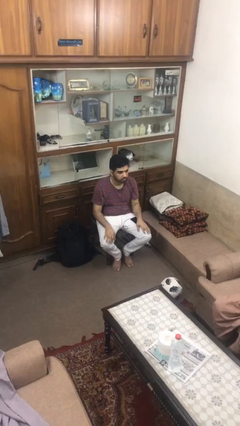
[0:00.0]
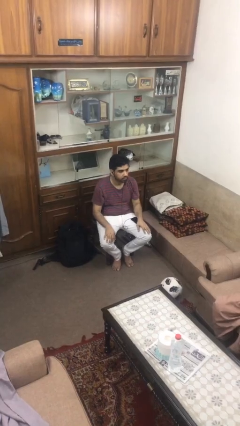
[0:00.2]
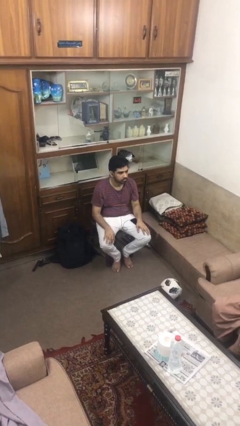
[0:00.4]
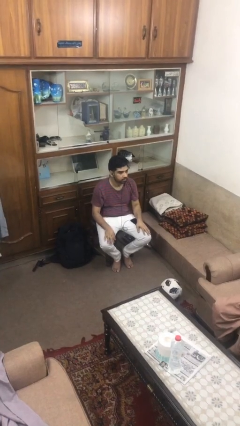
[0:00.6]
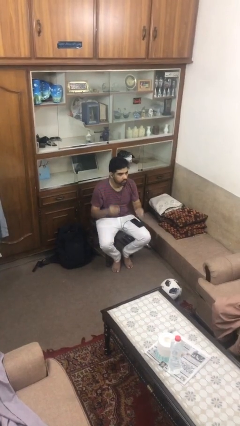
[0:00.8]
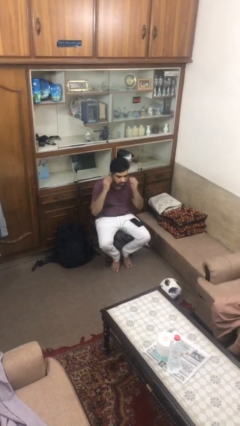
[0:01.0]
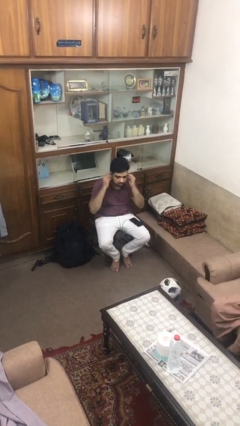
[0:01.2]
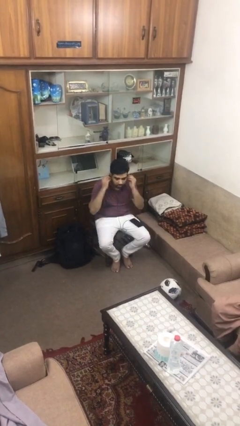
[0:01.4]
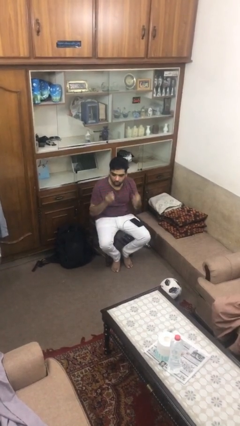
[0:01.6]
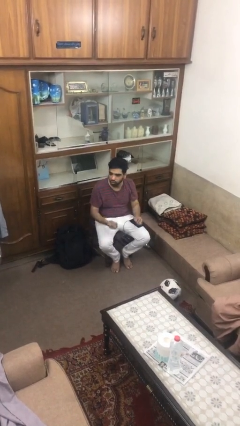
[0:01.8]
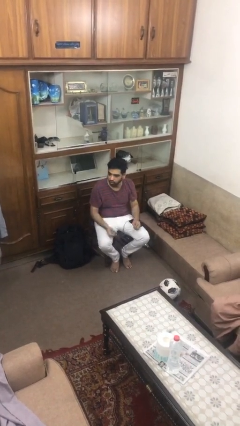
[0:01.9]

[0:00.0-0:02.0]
person takes off headphones

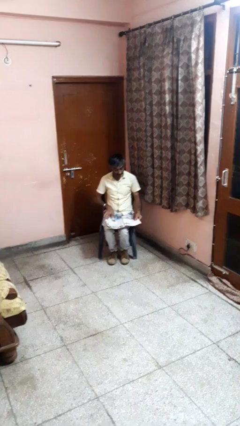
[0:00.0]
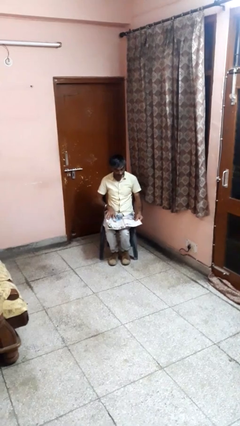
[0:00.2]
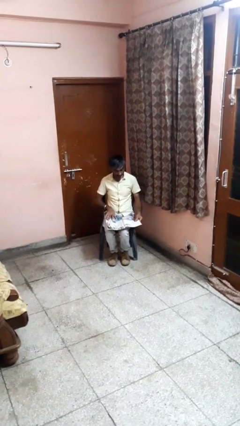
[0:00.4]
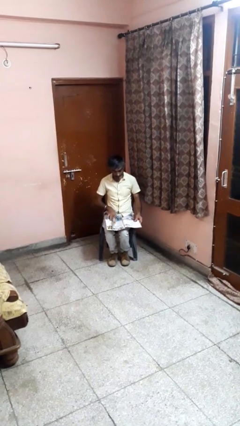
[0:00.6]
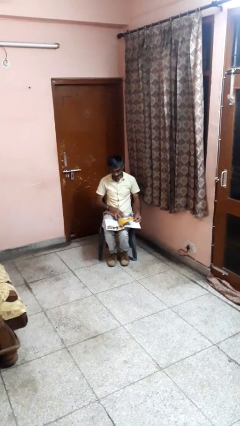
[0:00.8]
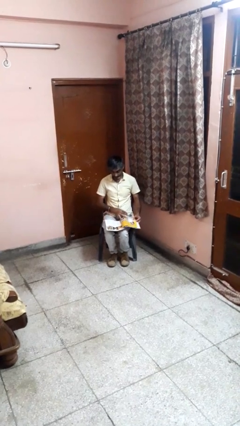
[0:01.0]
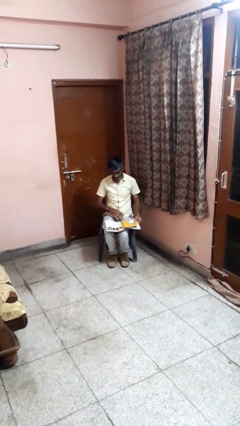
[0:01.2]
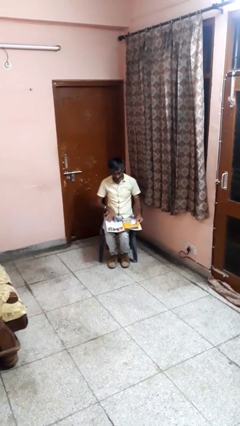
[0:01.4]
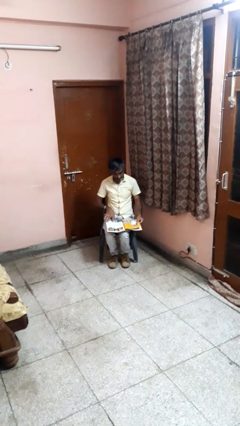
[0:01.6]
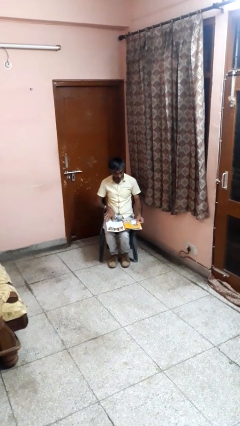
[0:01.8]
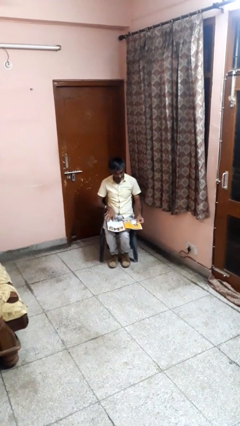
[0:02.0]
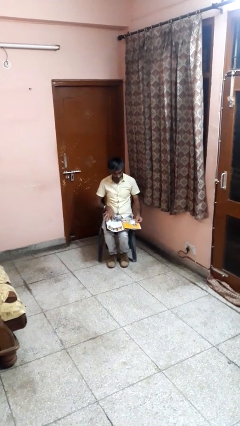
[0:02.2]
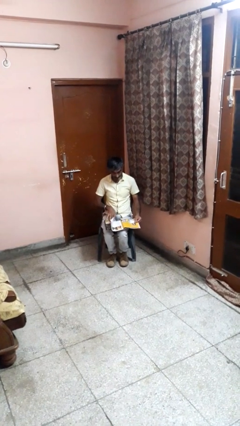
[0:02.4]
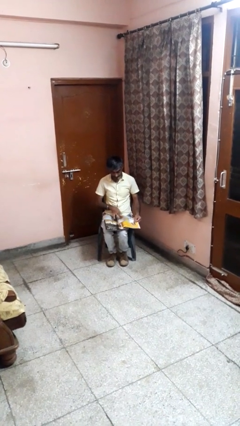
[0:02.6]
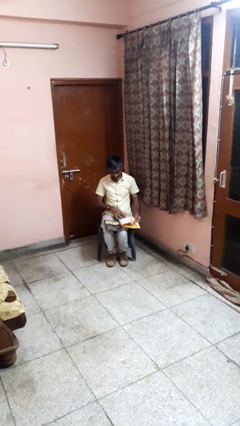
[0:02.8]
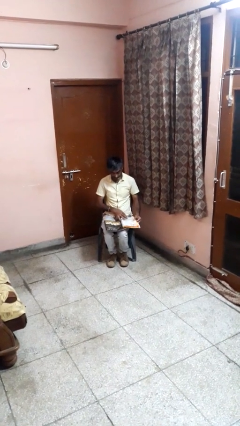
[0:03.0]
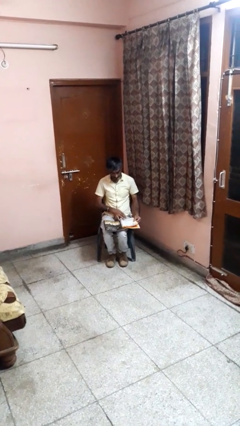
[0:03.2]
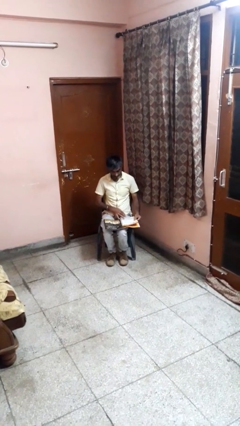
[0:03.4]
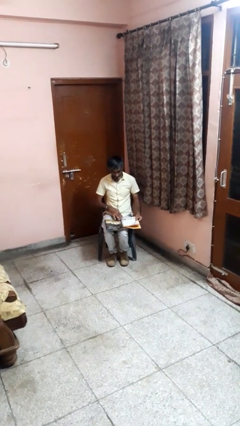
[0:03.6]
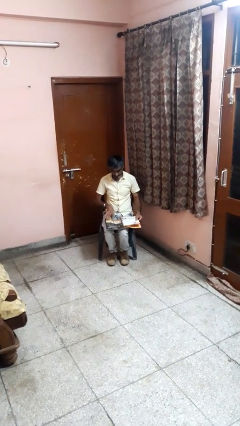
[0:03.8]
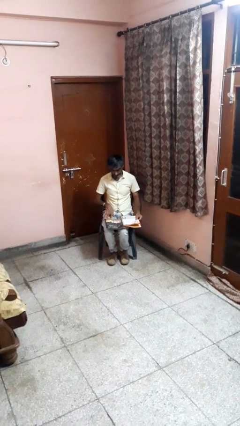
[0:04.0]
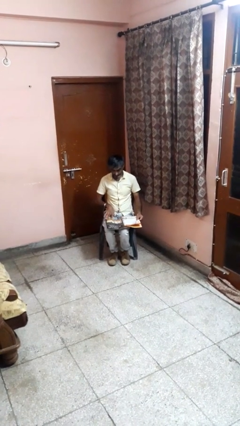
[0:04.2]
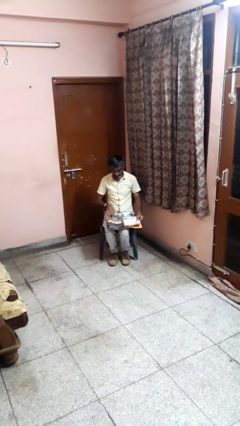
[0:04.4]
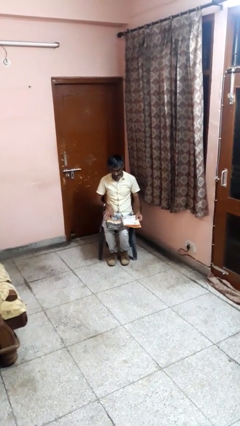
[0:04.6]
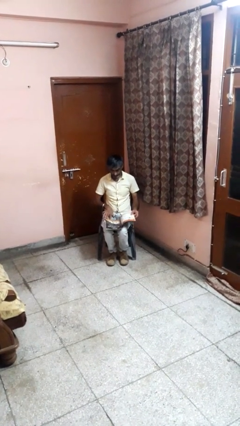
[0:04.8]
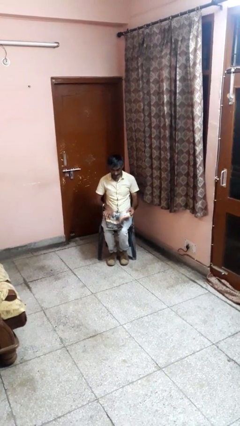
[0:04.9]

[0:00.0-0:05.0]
person reads magazine

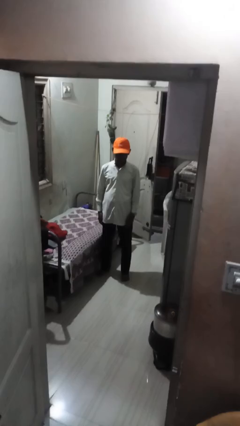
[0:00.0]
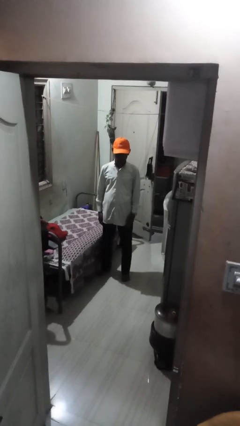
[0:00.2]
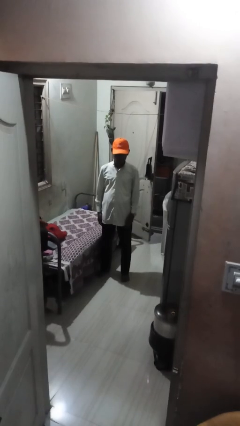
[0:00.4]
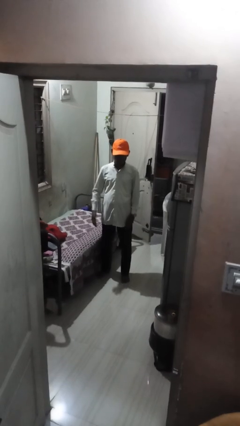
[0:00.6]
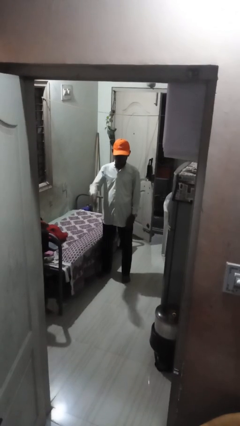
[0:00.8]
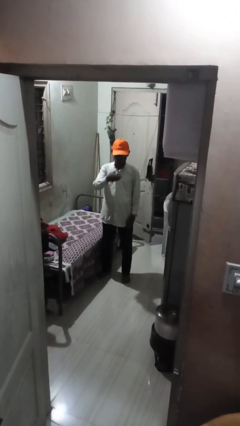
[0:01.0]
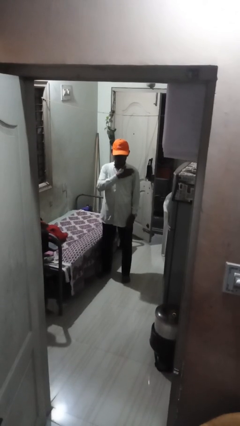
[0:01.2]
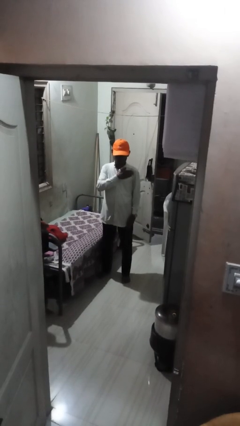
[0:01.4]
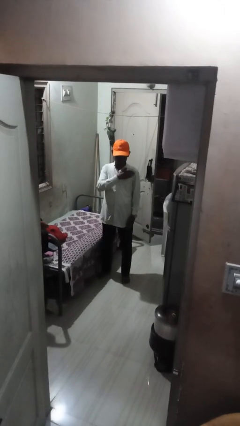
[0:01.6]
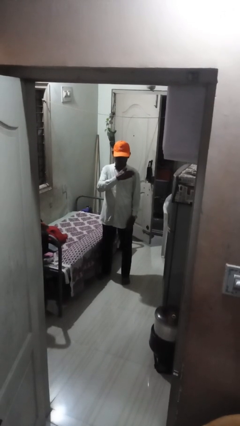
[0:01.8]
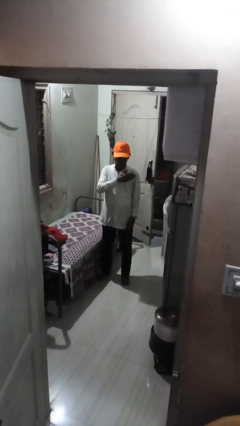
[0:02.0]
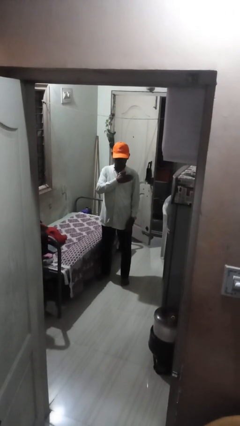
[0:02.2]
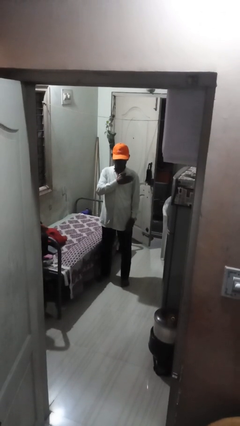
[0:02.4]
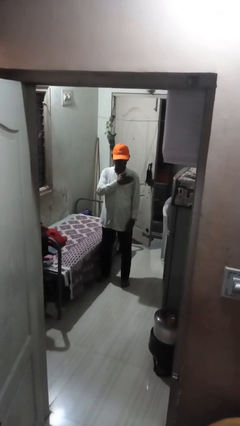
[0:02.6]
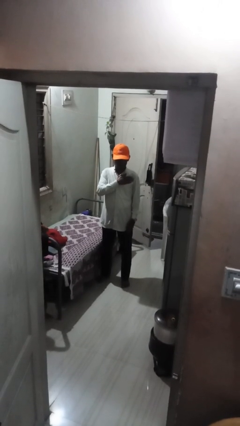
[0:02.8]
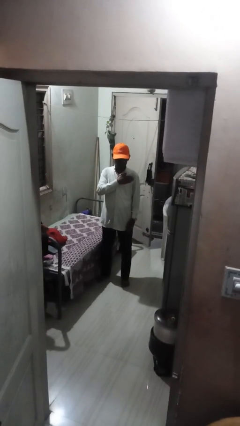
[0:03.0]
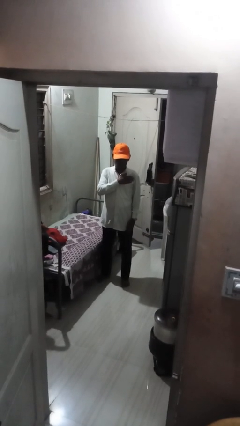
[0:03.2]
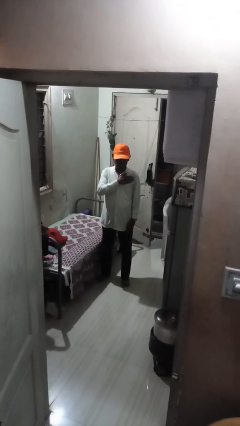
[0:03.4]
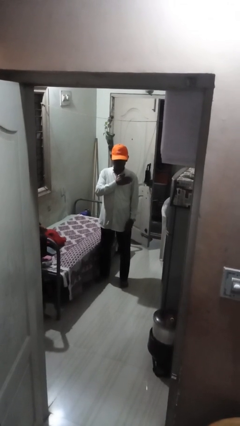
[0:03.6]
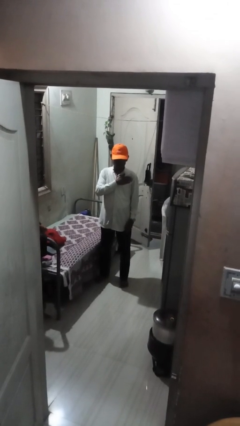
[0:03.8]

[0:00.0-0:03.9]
person drums on chest

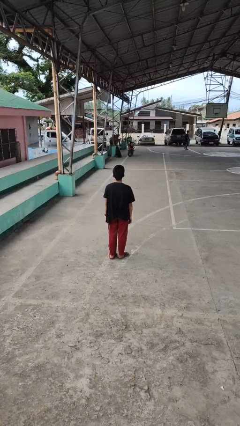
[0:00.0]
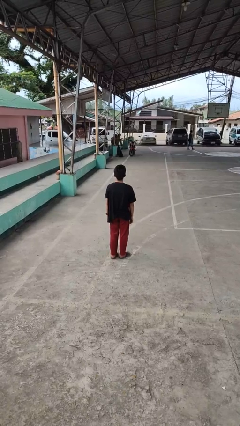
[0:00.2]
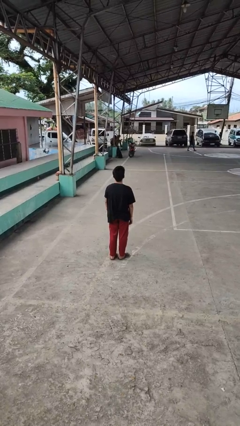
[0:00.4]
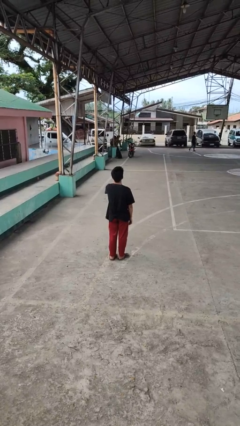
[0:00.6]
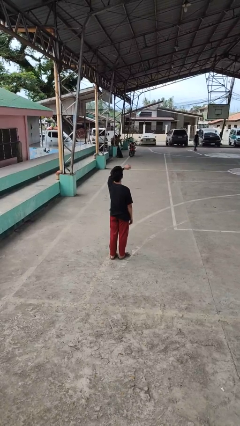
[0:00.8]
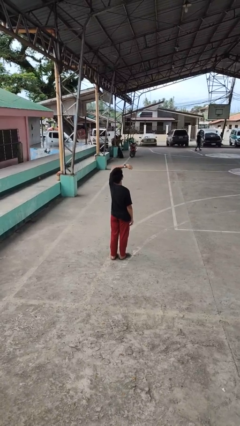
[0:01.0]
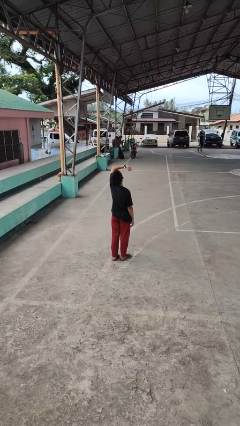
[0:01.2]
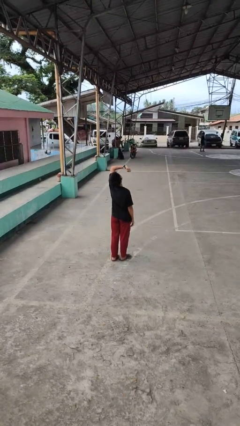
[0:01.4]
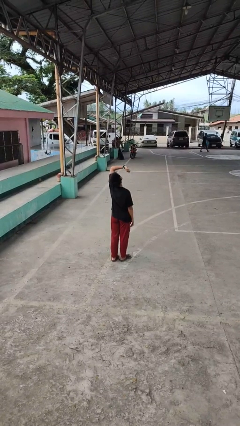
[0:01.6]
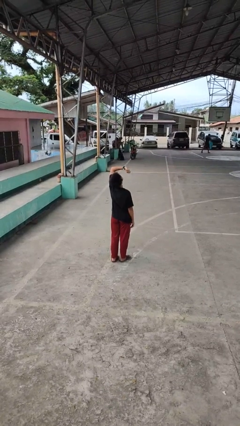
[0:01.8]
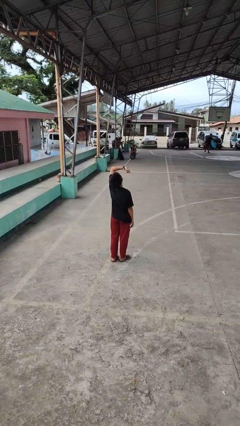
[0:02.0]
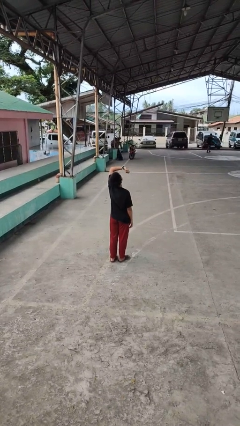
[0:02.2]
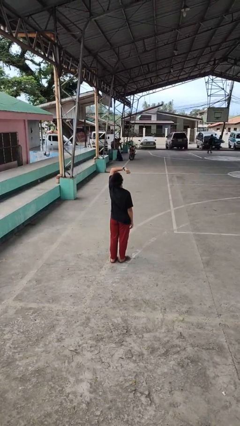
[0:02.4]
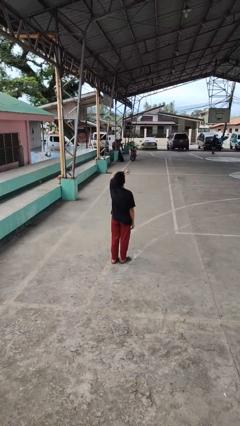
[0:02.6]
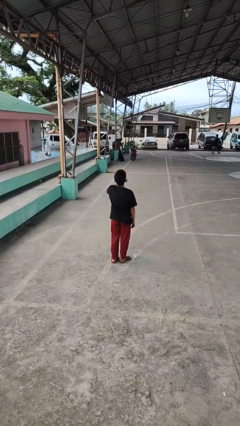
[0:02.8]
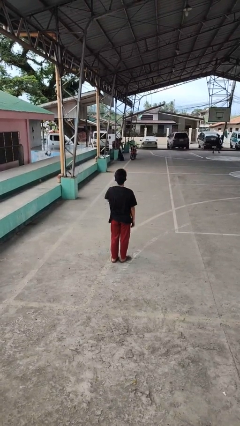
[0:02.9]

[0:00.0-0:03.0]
person looks at wristwatch

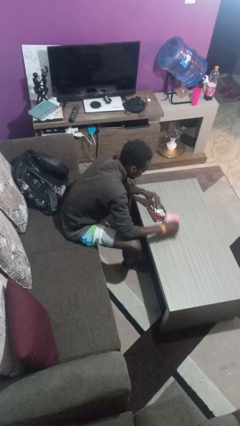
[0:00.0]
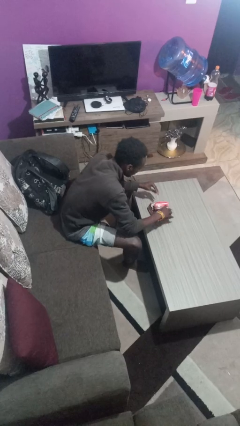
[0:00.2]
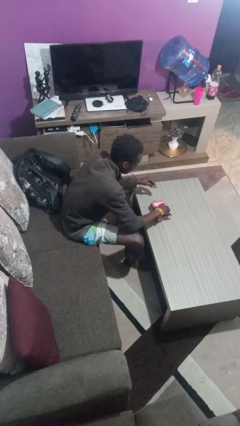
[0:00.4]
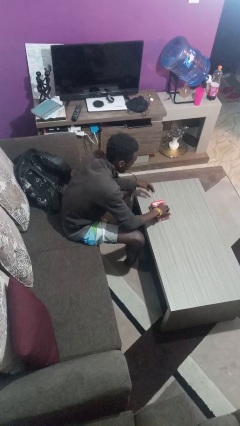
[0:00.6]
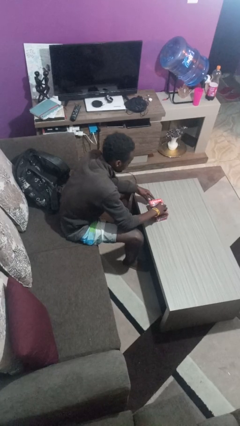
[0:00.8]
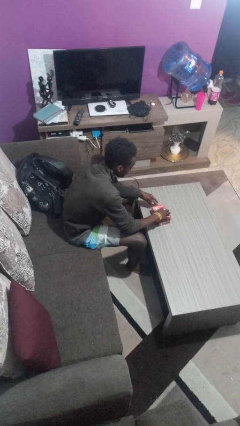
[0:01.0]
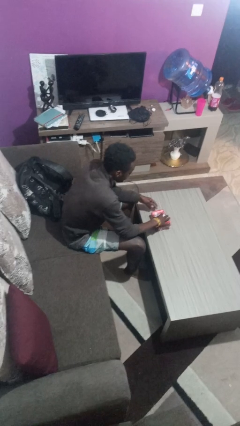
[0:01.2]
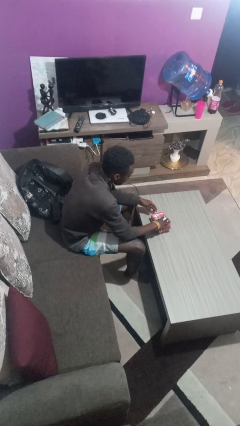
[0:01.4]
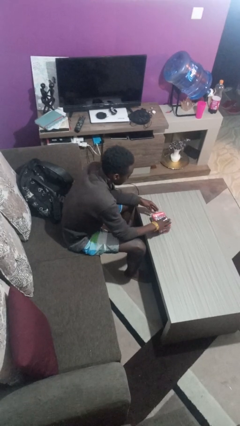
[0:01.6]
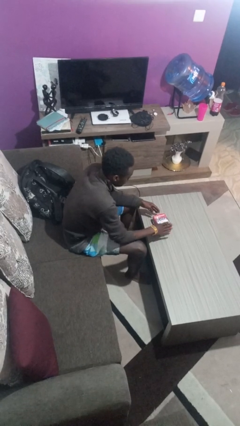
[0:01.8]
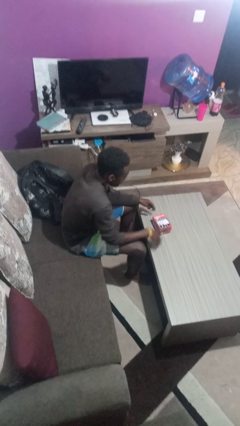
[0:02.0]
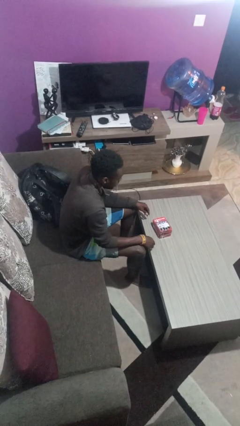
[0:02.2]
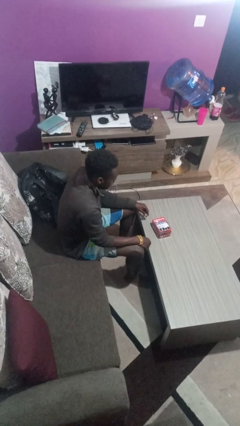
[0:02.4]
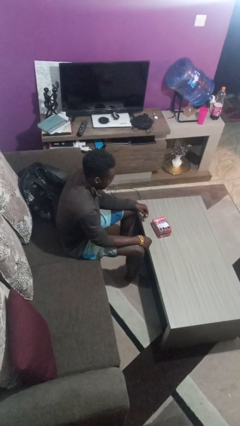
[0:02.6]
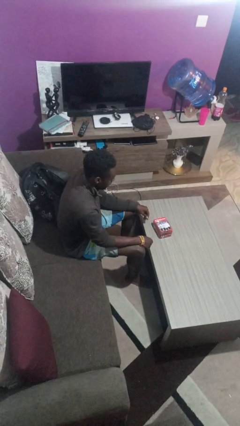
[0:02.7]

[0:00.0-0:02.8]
person closes jewelry box

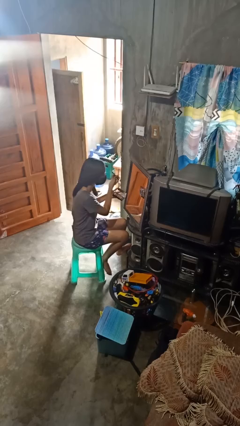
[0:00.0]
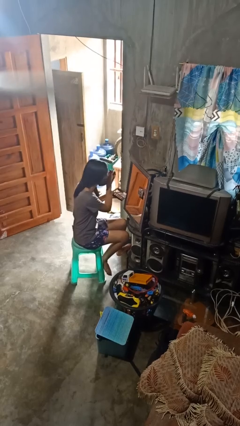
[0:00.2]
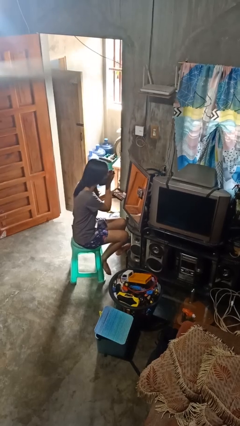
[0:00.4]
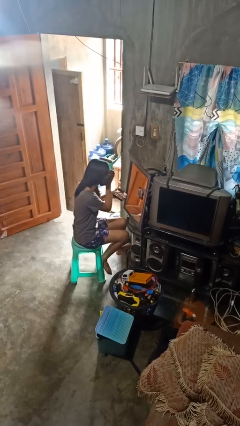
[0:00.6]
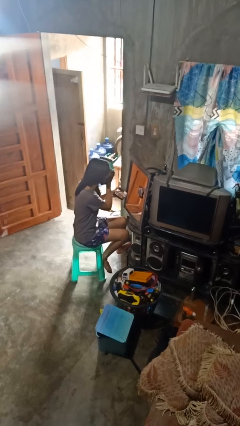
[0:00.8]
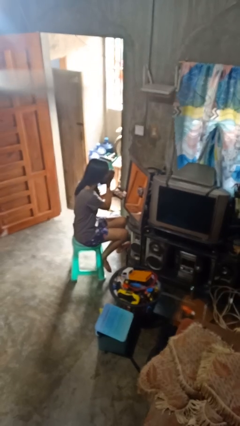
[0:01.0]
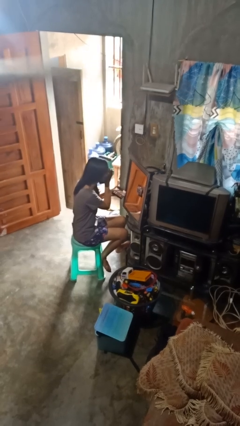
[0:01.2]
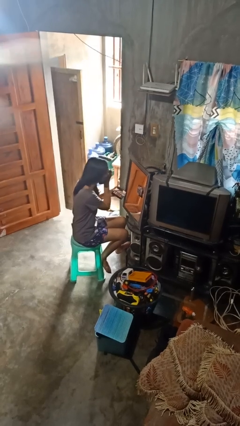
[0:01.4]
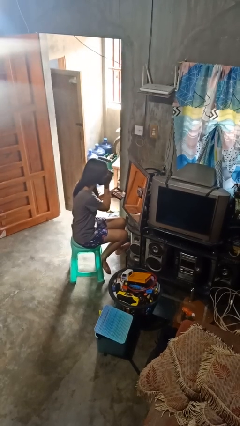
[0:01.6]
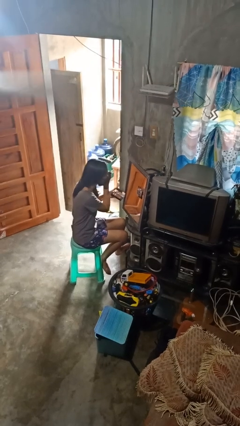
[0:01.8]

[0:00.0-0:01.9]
person applies eye makeup
